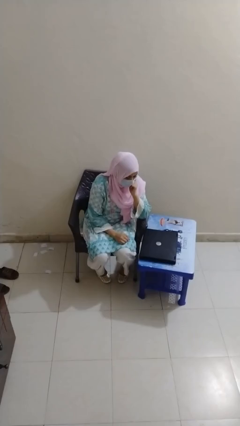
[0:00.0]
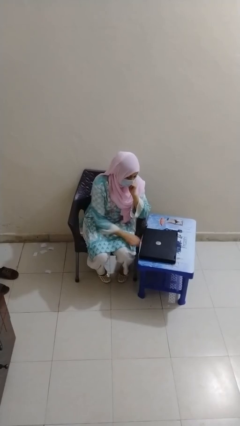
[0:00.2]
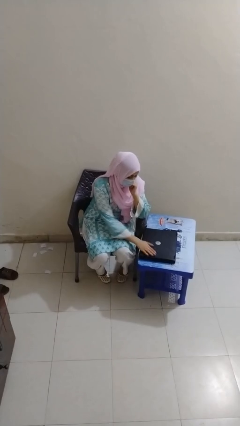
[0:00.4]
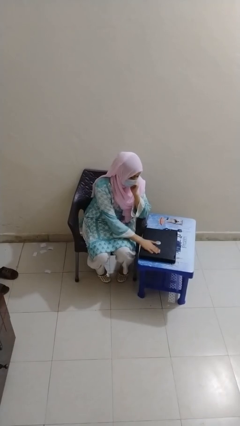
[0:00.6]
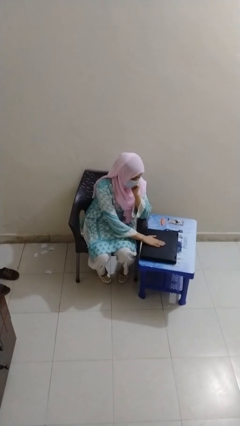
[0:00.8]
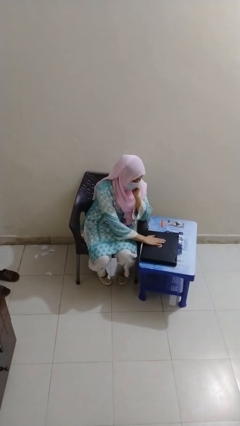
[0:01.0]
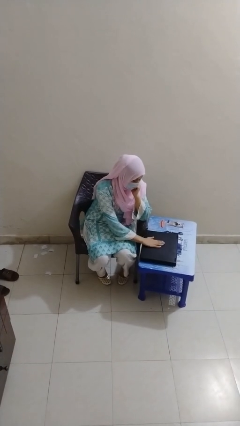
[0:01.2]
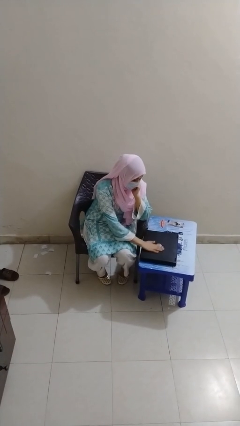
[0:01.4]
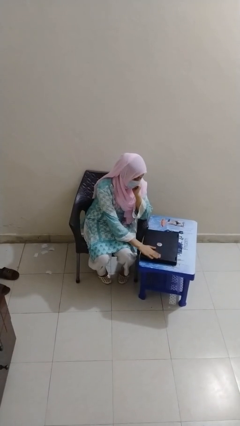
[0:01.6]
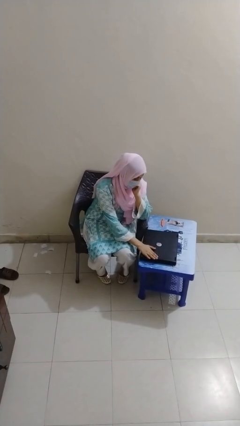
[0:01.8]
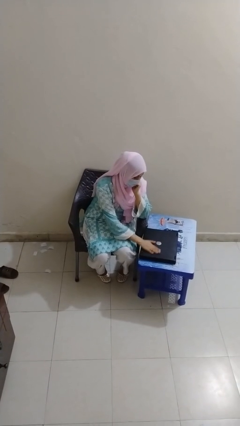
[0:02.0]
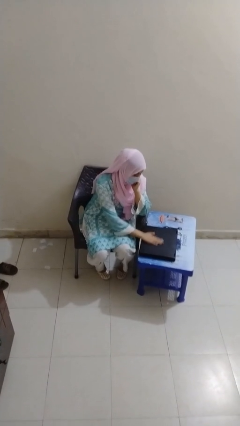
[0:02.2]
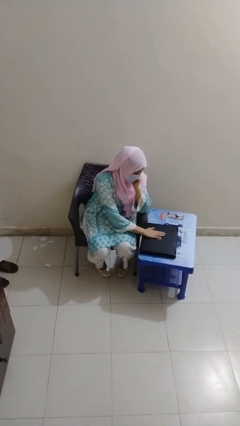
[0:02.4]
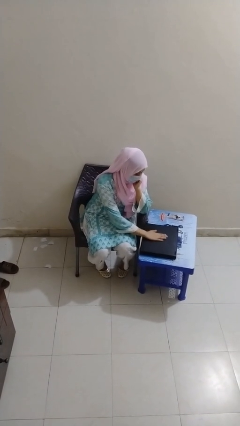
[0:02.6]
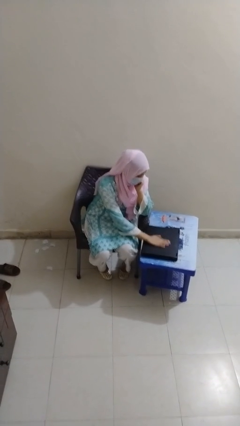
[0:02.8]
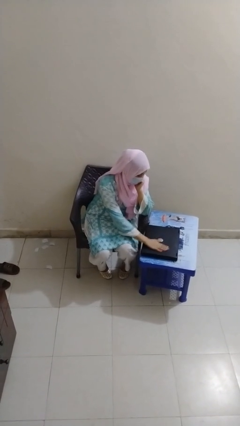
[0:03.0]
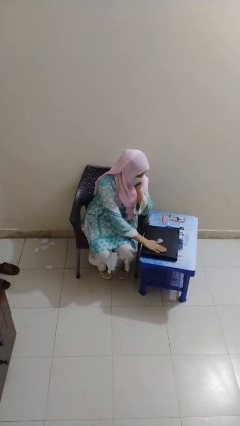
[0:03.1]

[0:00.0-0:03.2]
person waves hand over object

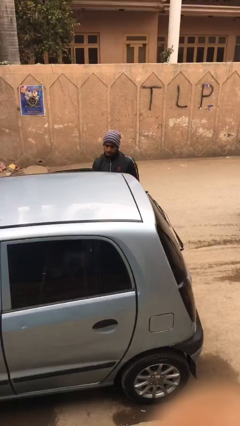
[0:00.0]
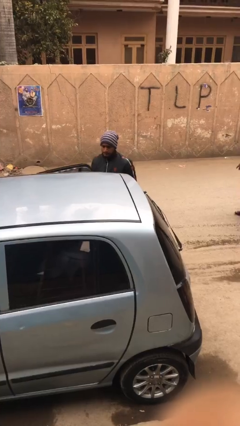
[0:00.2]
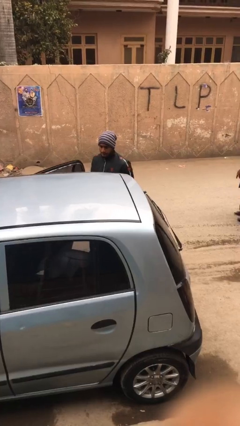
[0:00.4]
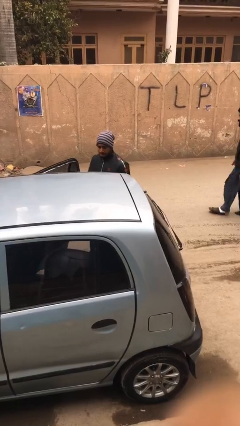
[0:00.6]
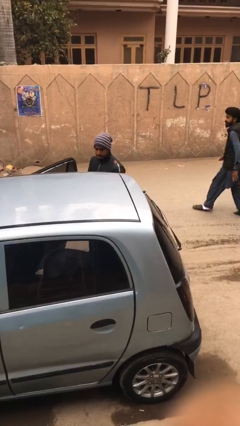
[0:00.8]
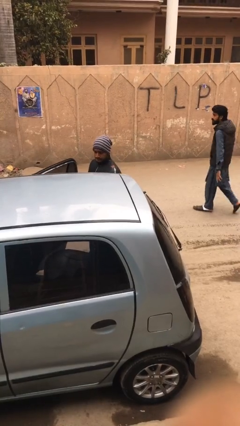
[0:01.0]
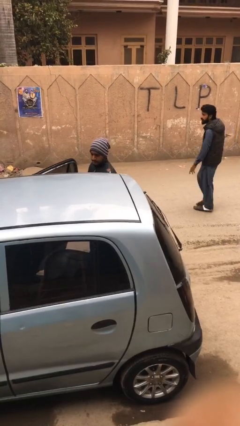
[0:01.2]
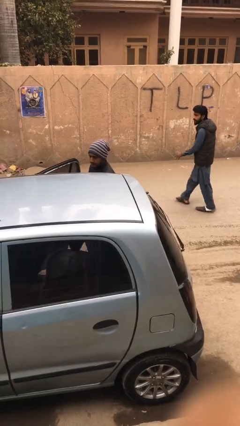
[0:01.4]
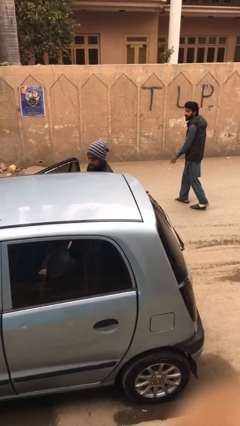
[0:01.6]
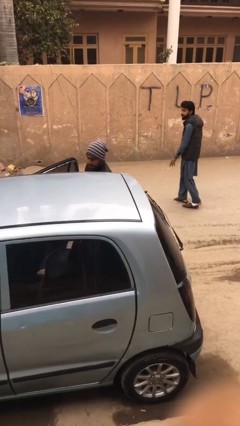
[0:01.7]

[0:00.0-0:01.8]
person loads car

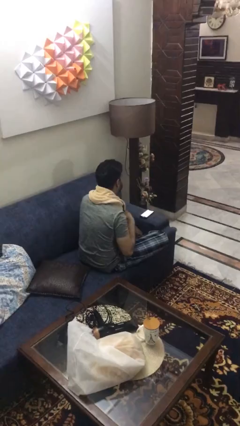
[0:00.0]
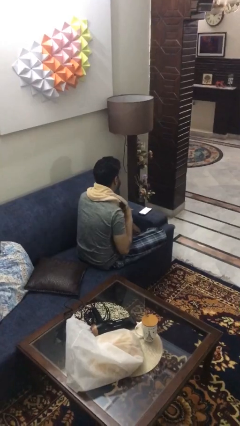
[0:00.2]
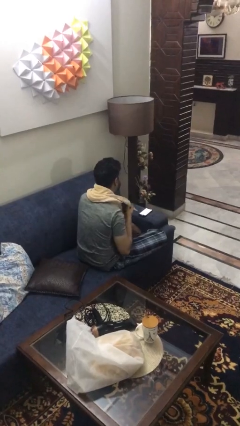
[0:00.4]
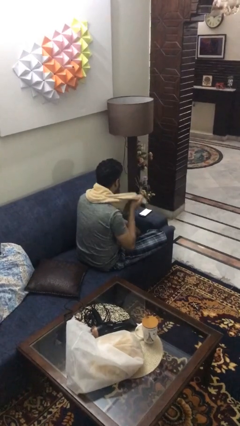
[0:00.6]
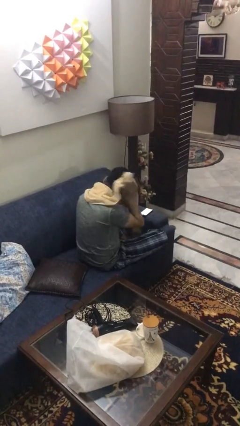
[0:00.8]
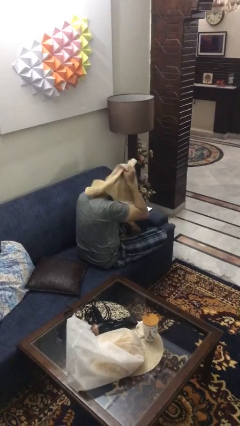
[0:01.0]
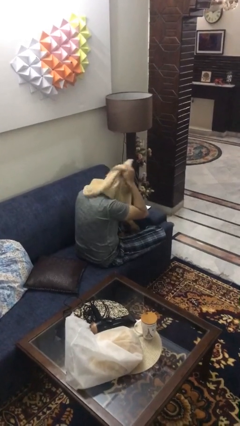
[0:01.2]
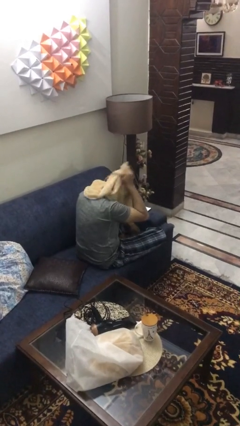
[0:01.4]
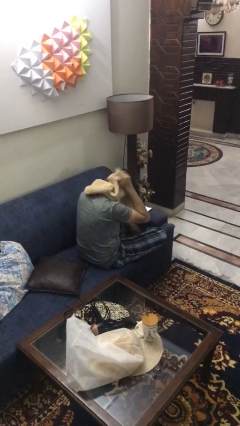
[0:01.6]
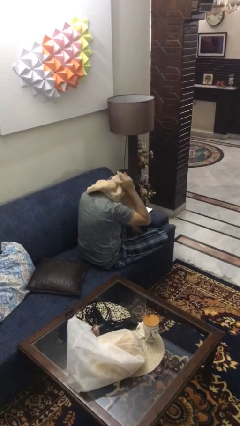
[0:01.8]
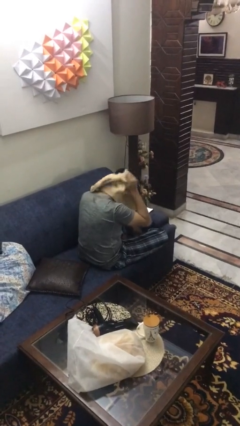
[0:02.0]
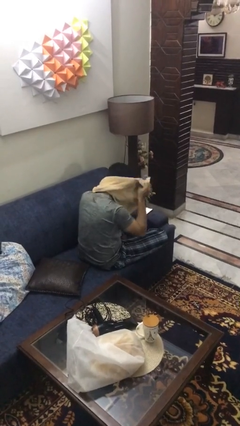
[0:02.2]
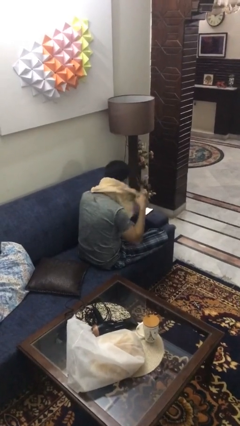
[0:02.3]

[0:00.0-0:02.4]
person dries hair with towel

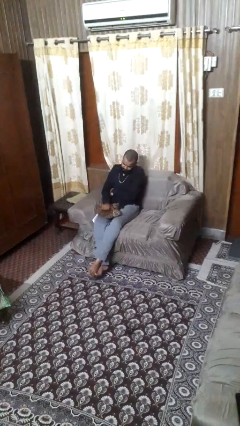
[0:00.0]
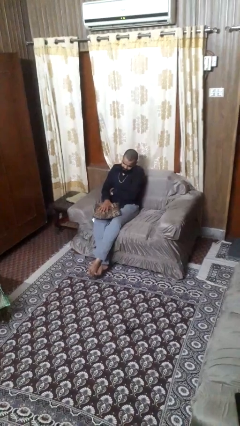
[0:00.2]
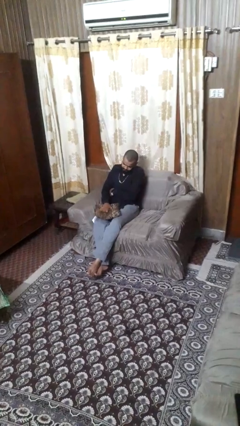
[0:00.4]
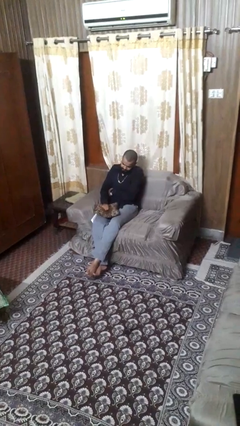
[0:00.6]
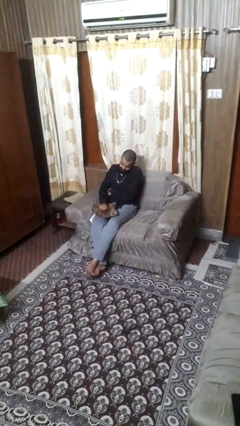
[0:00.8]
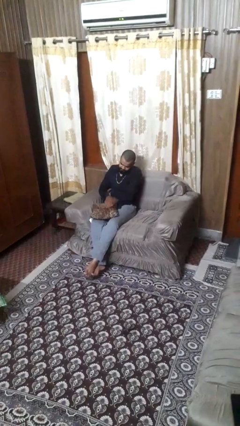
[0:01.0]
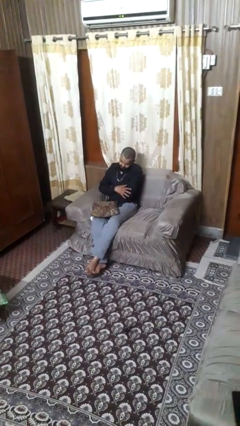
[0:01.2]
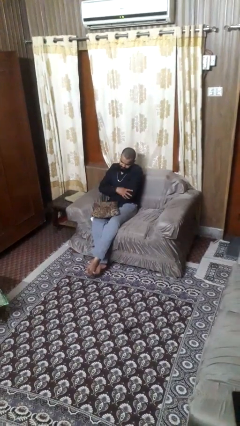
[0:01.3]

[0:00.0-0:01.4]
person squeezes object

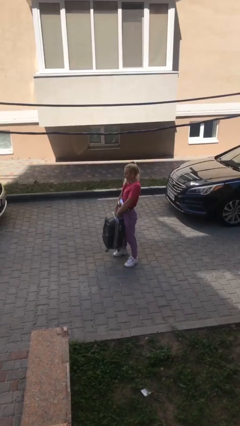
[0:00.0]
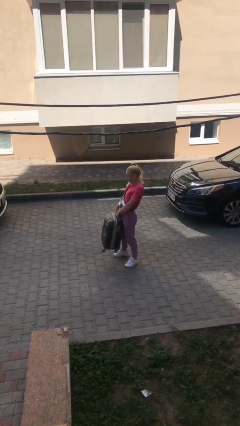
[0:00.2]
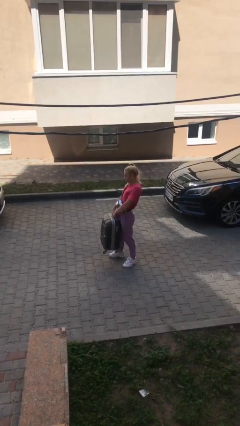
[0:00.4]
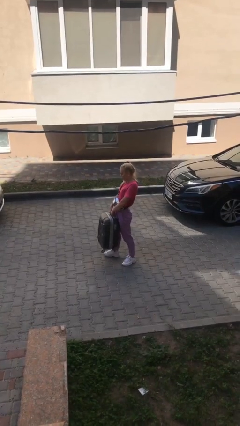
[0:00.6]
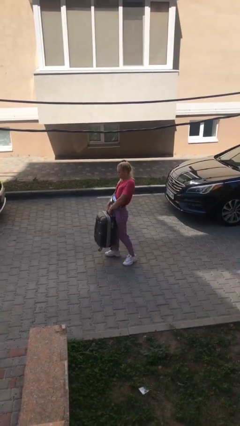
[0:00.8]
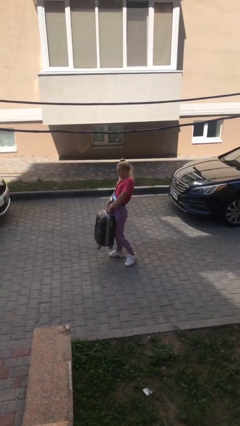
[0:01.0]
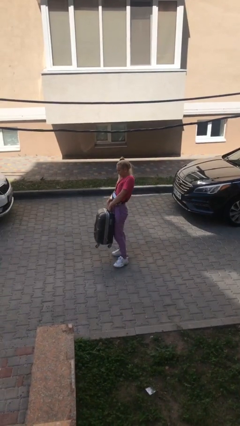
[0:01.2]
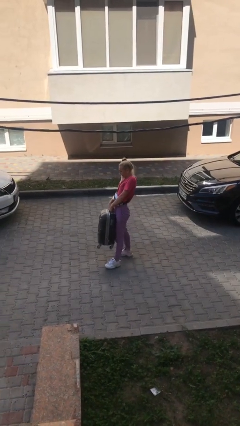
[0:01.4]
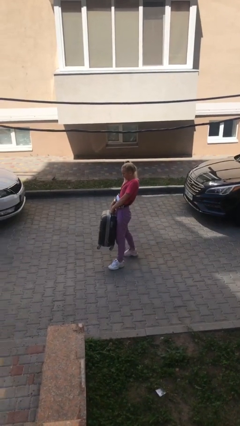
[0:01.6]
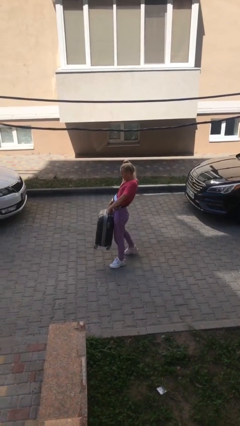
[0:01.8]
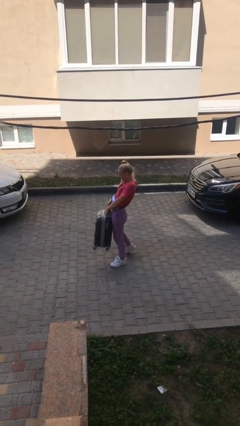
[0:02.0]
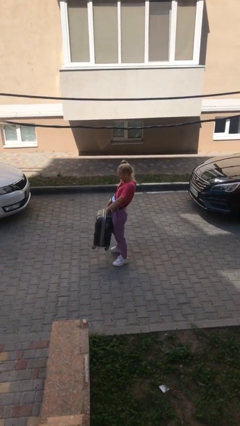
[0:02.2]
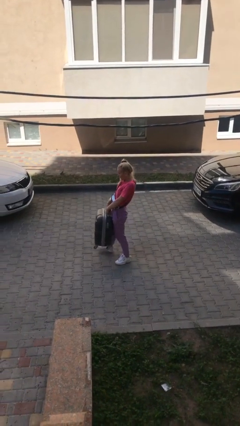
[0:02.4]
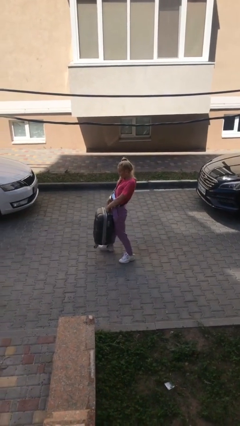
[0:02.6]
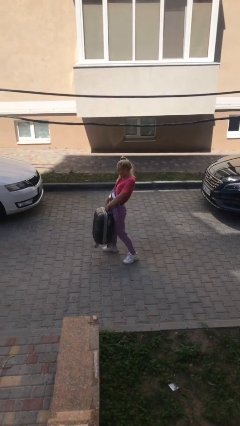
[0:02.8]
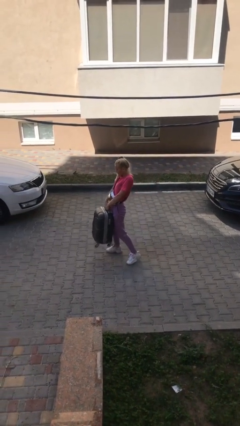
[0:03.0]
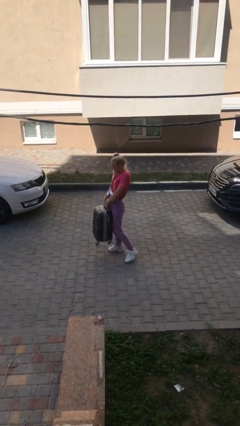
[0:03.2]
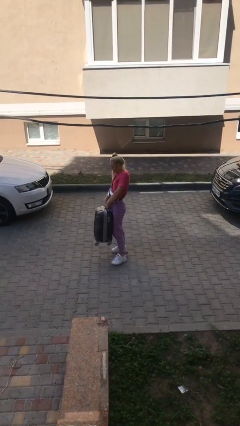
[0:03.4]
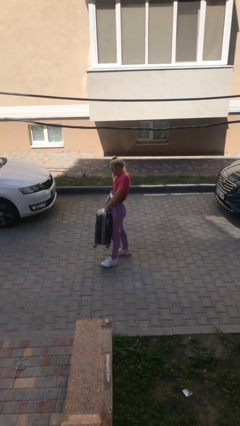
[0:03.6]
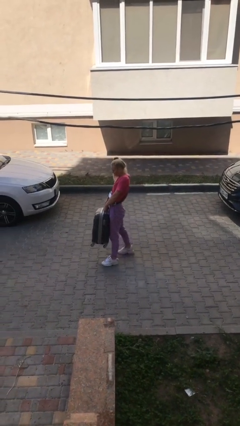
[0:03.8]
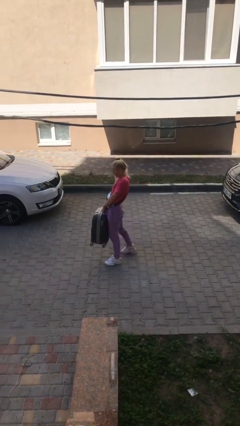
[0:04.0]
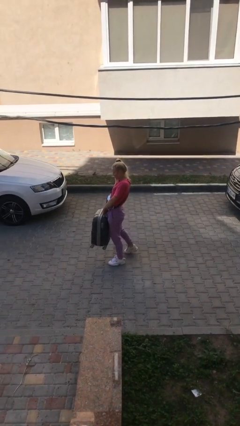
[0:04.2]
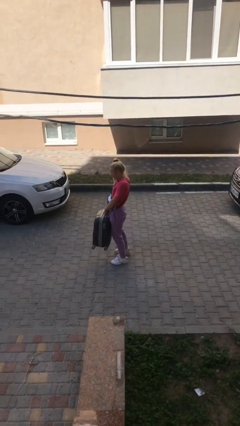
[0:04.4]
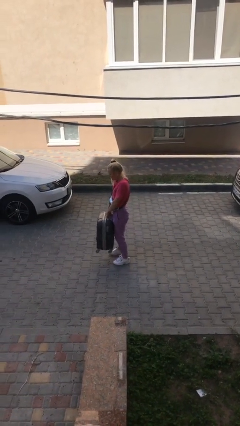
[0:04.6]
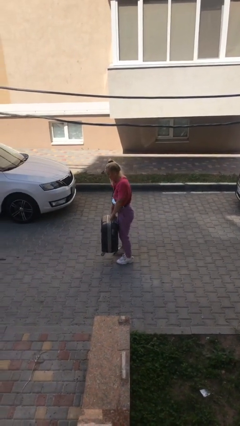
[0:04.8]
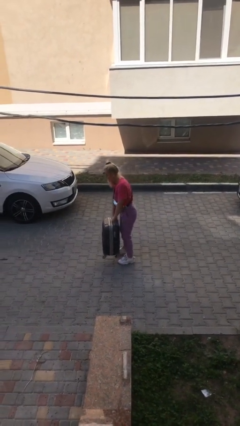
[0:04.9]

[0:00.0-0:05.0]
person carries heavy object

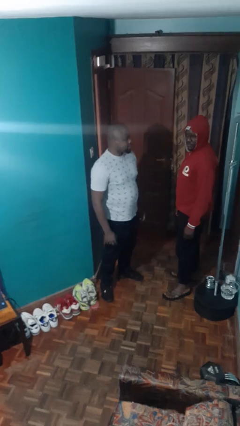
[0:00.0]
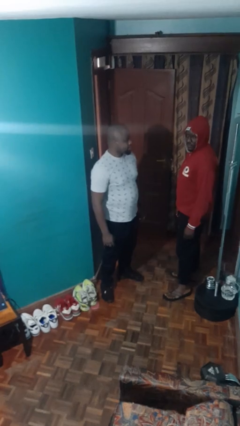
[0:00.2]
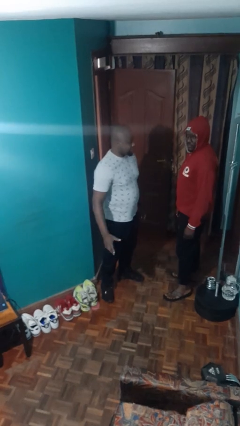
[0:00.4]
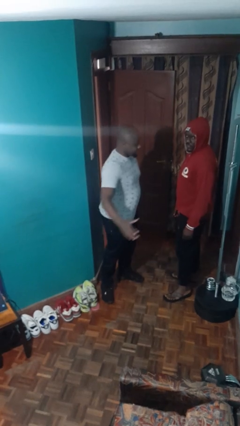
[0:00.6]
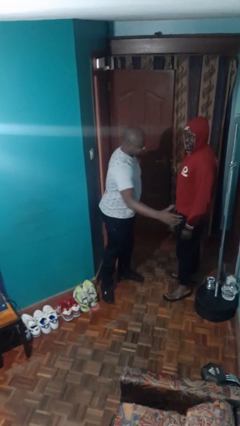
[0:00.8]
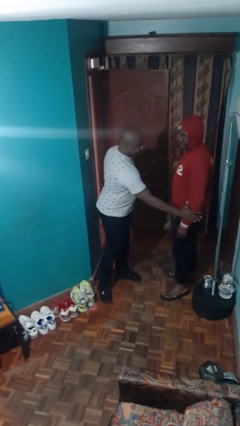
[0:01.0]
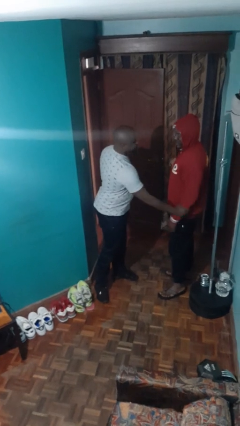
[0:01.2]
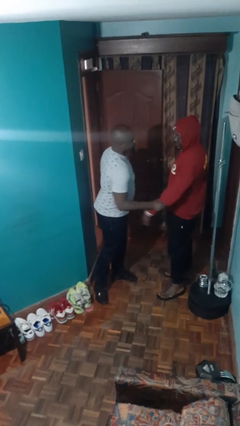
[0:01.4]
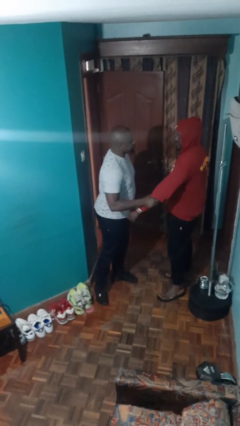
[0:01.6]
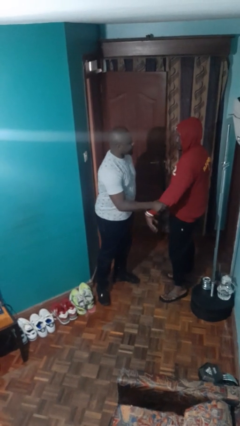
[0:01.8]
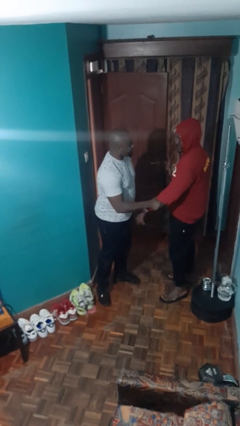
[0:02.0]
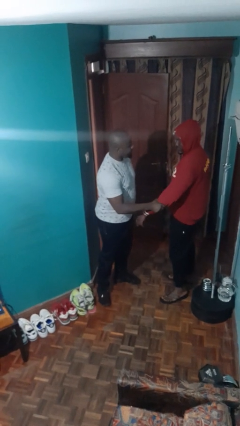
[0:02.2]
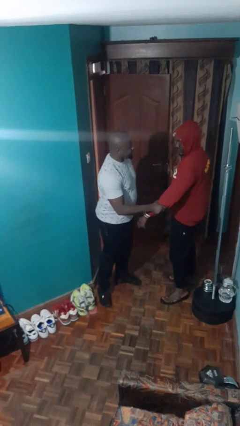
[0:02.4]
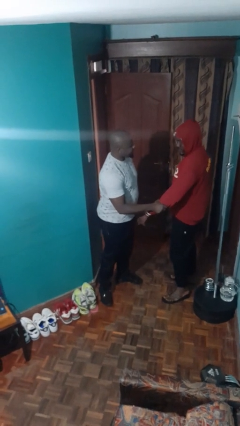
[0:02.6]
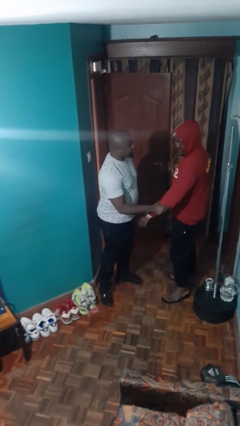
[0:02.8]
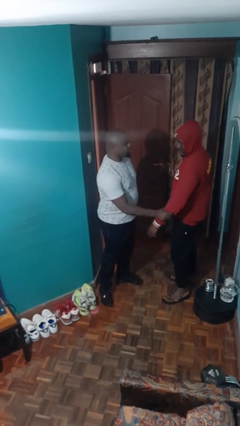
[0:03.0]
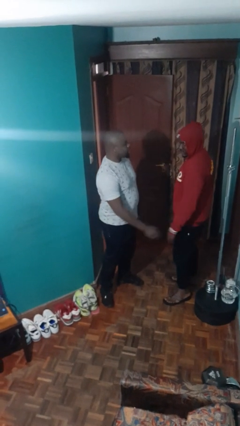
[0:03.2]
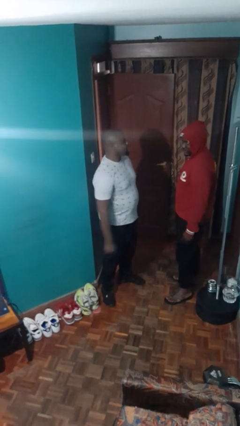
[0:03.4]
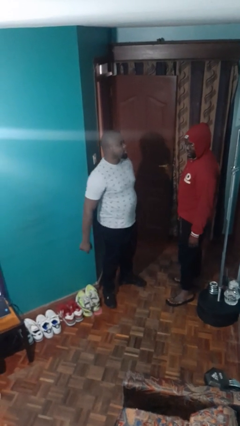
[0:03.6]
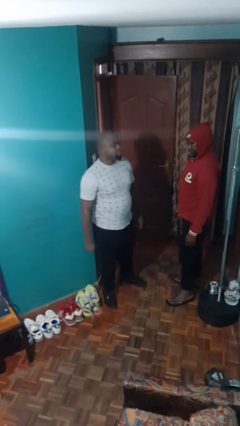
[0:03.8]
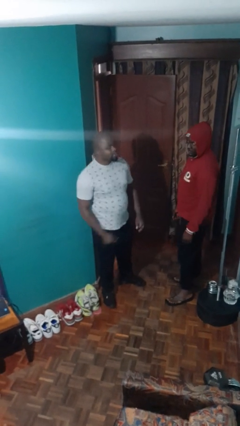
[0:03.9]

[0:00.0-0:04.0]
person grabs person by forearm
